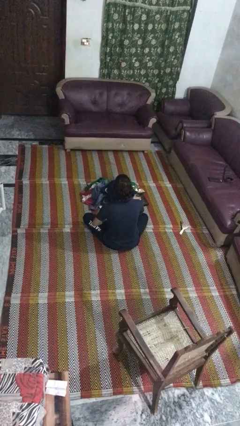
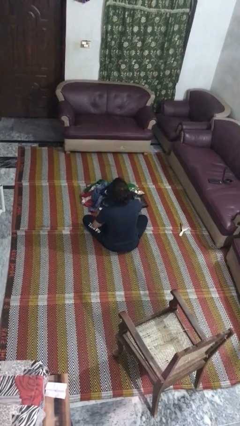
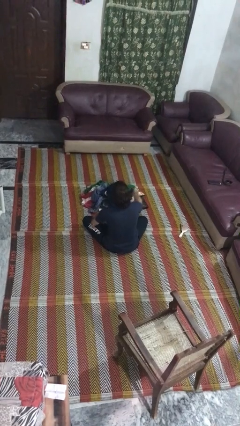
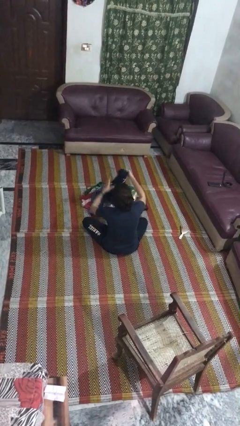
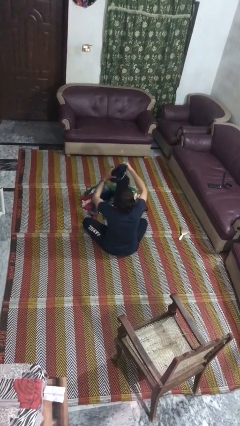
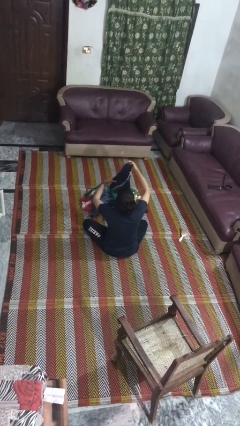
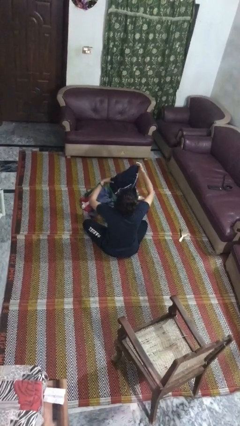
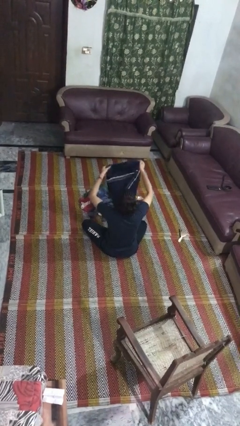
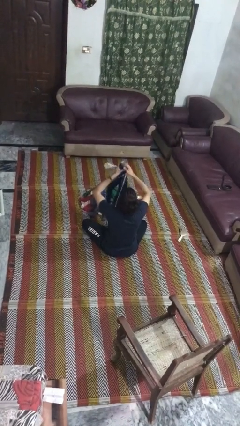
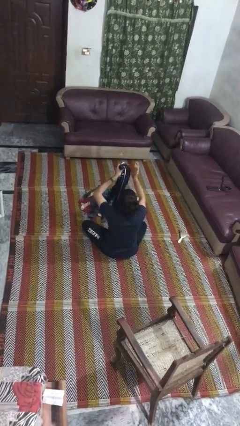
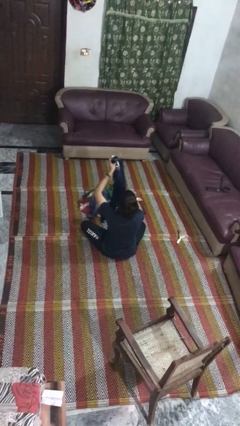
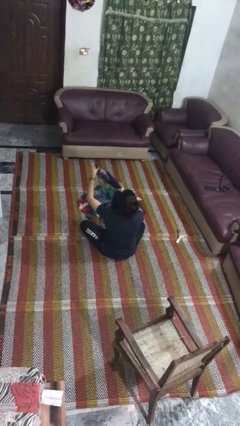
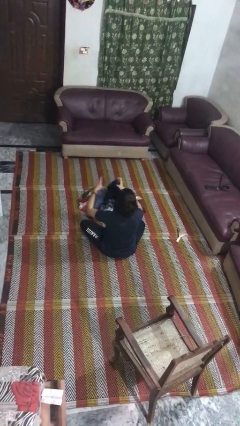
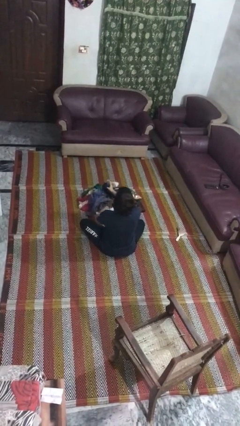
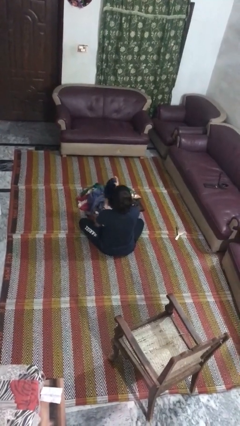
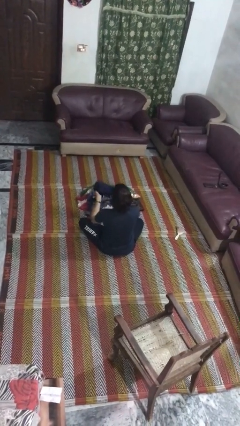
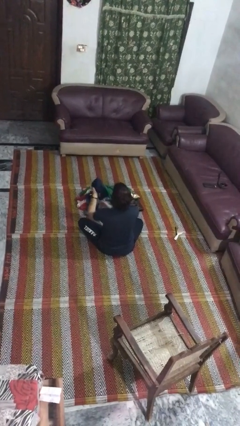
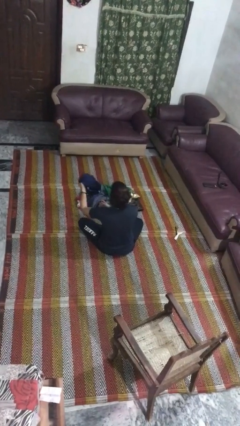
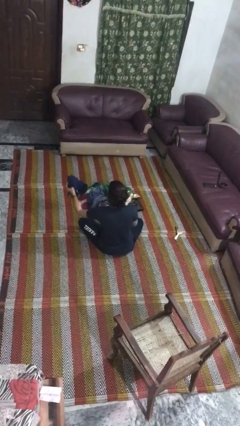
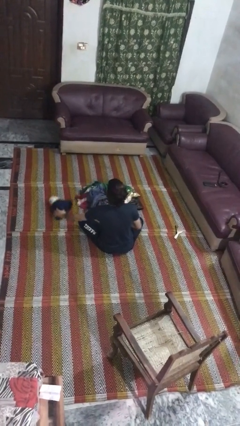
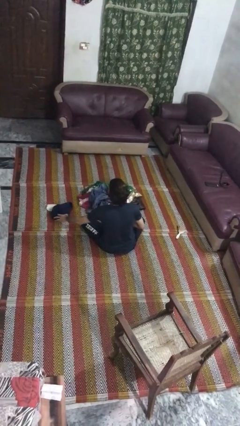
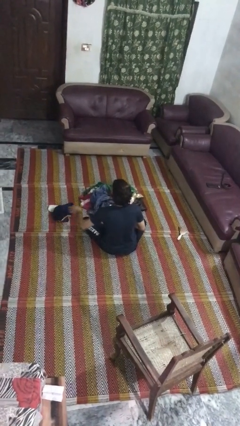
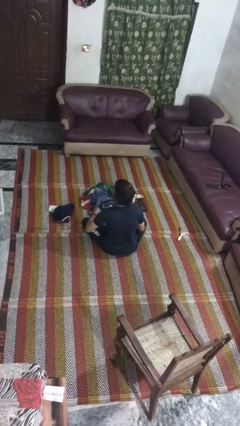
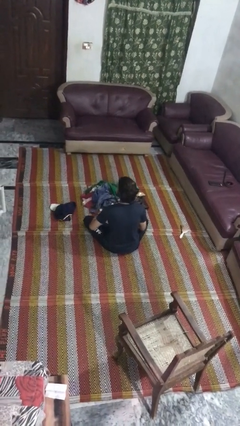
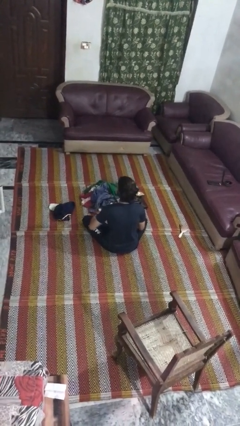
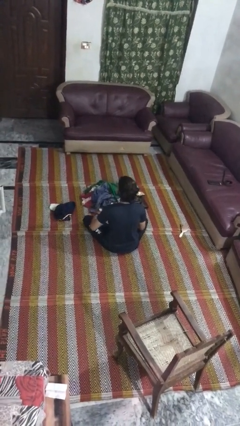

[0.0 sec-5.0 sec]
person folds pants

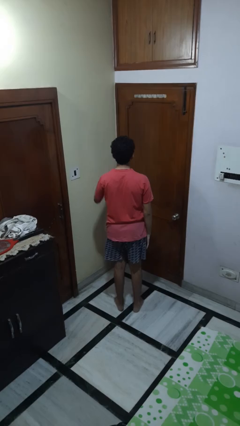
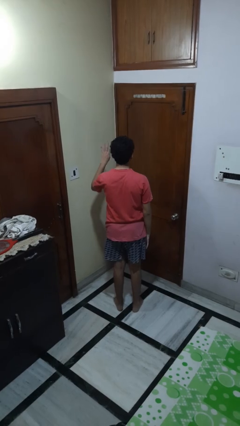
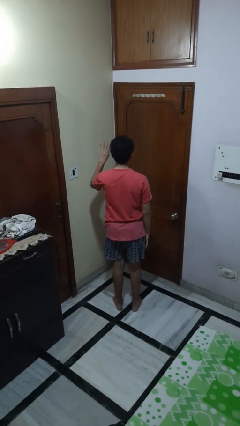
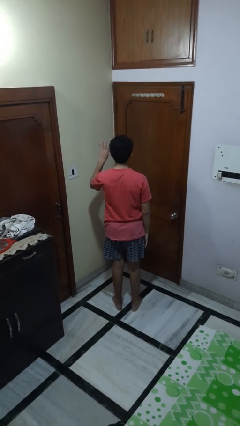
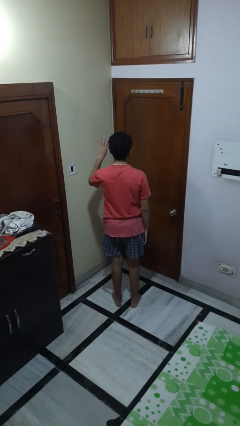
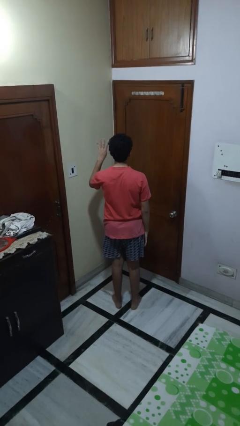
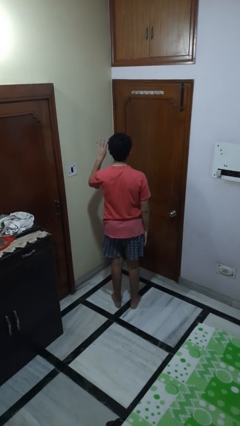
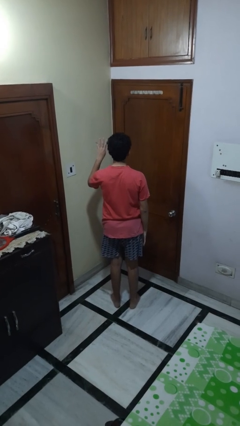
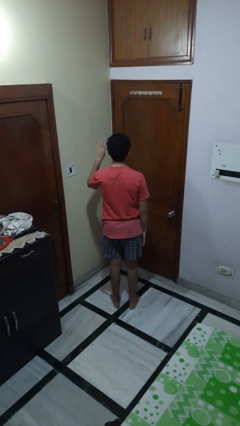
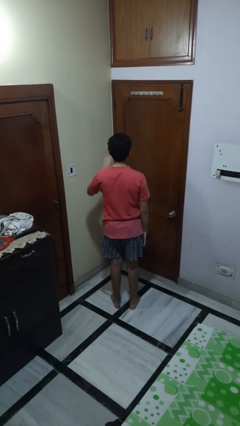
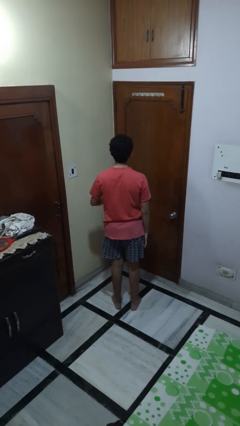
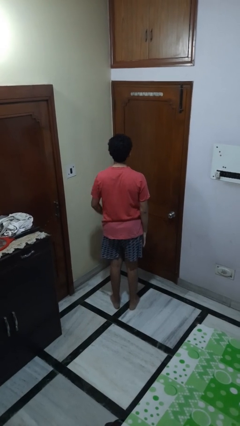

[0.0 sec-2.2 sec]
person gestures number four

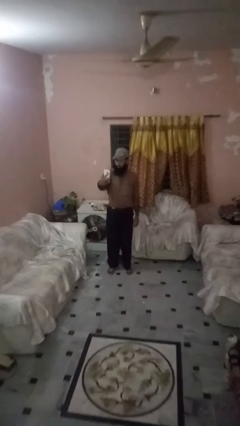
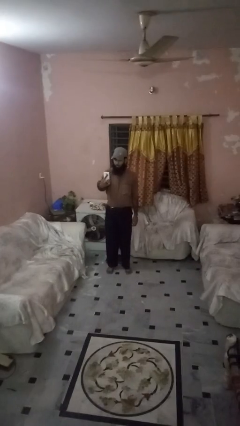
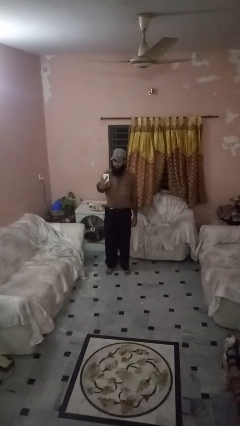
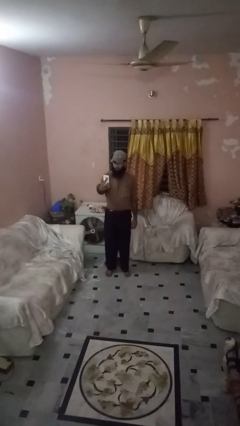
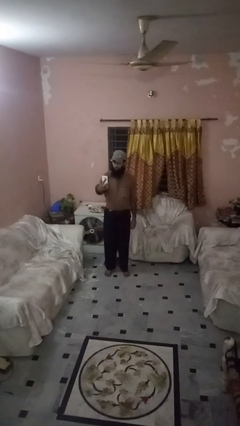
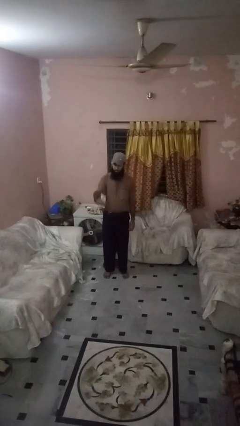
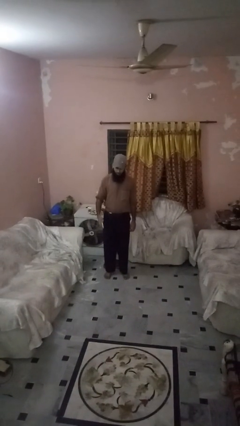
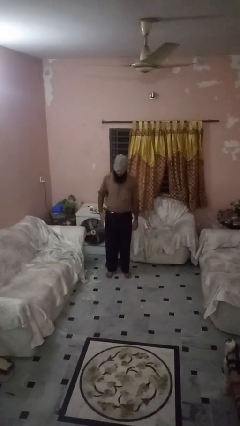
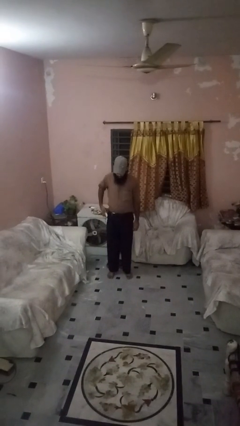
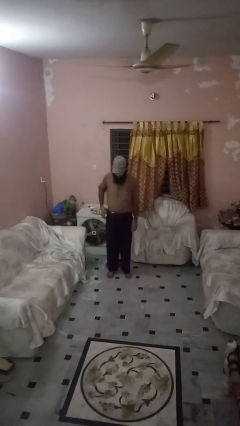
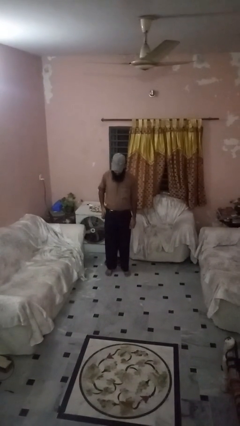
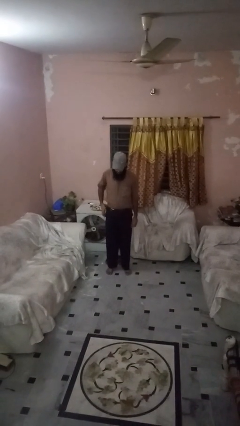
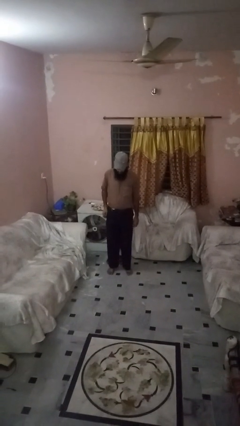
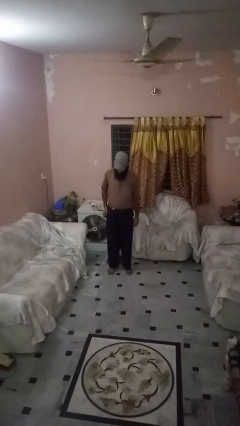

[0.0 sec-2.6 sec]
person puts phone into pocket

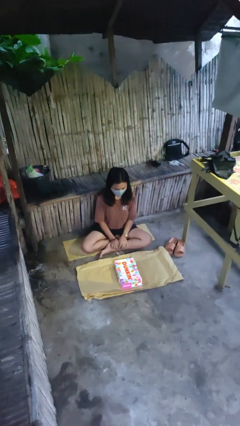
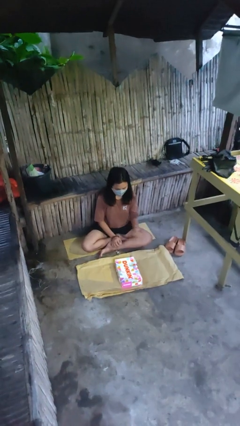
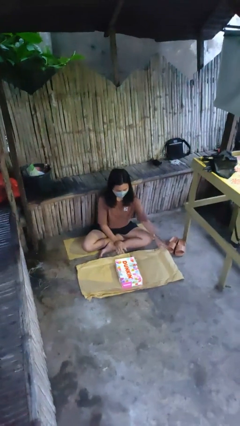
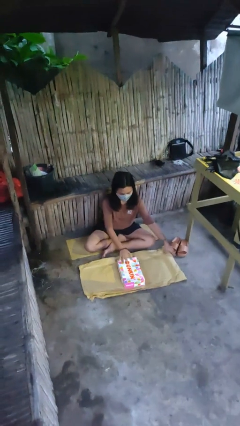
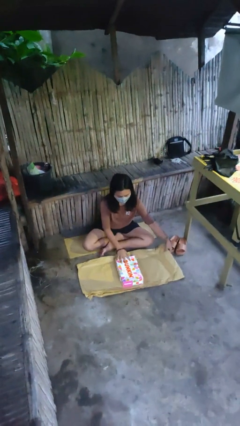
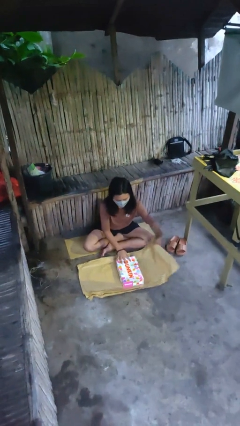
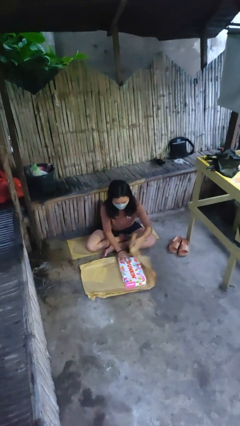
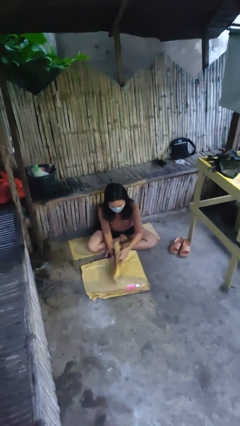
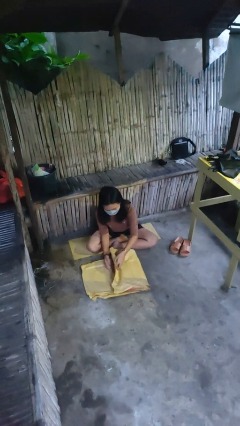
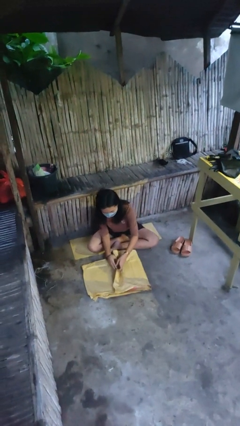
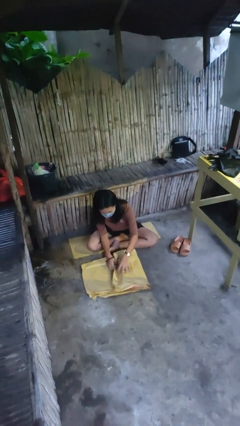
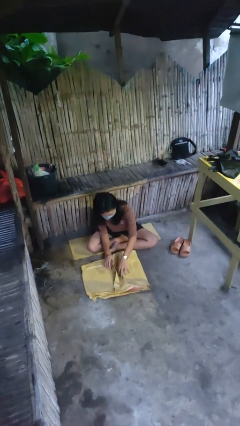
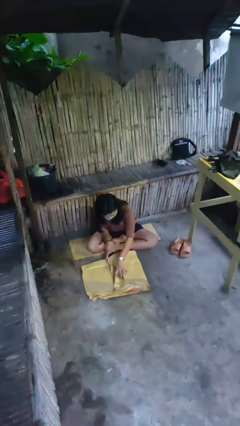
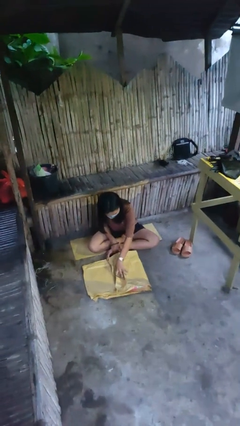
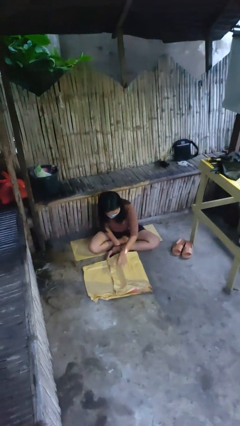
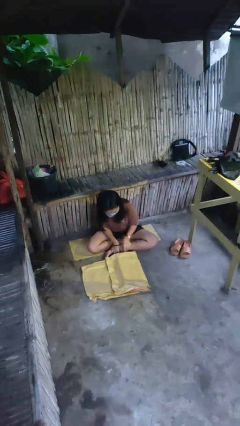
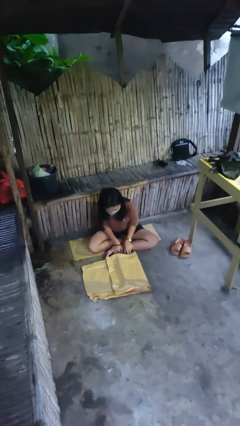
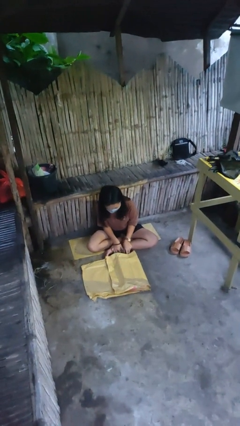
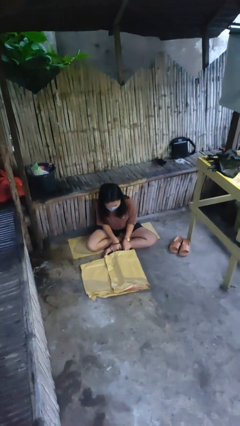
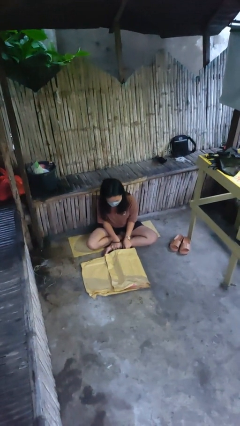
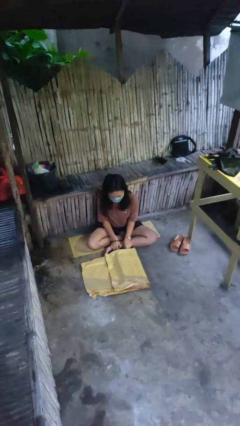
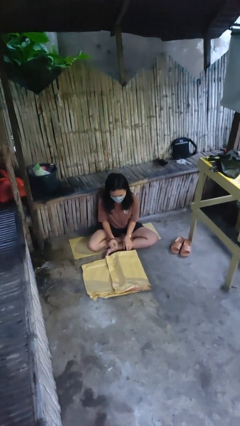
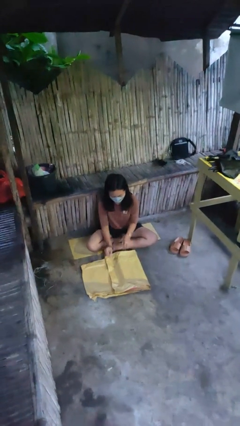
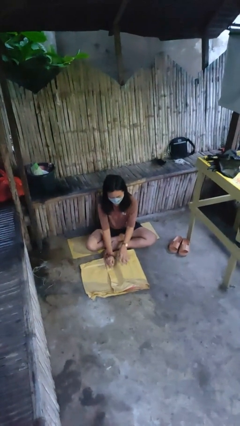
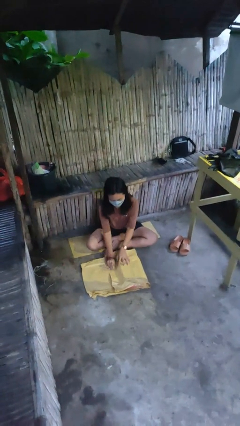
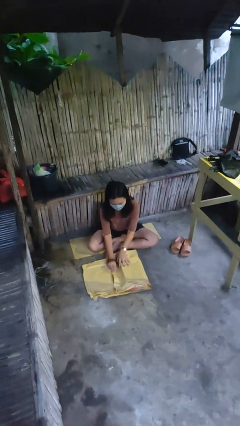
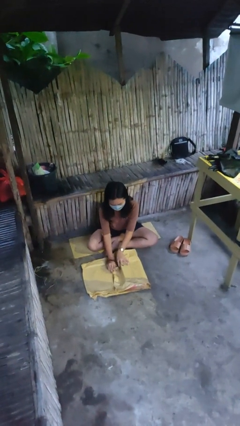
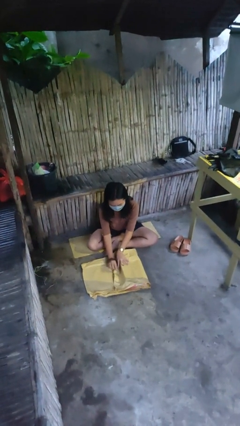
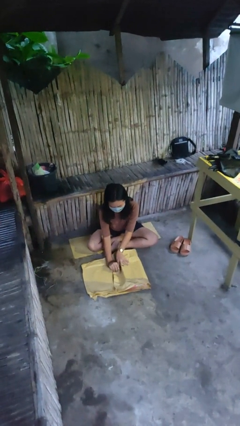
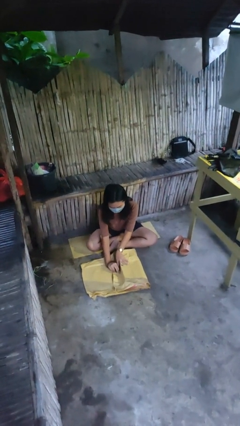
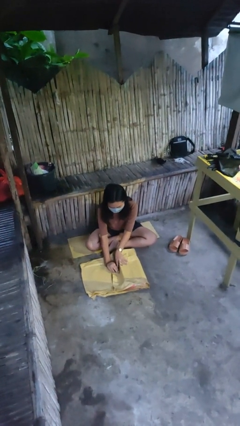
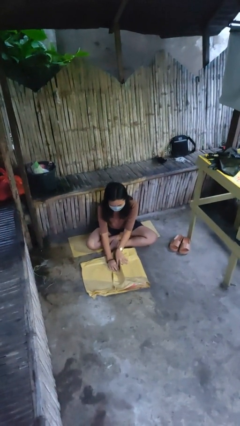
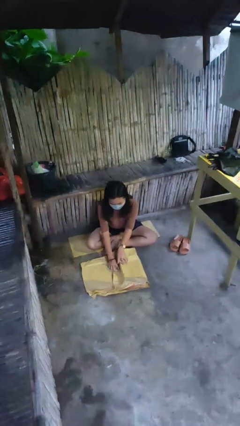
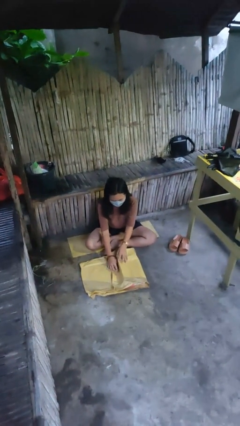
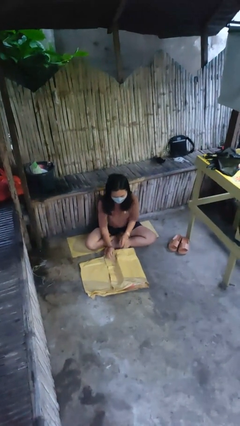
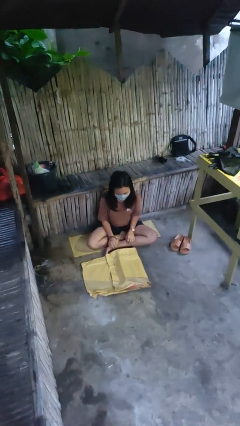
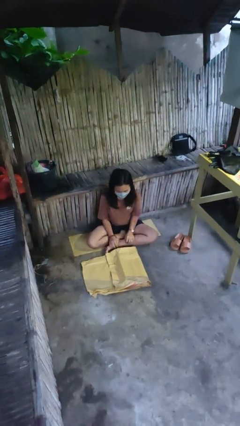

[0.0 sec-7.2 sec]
person wraps box

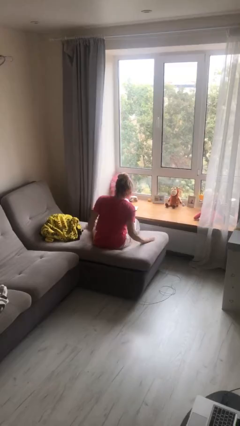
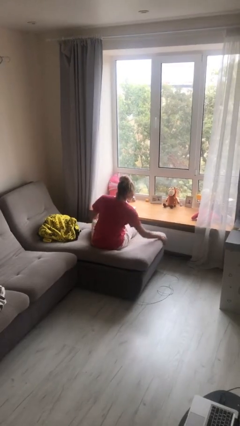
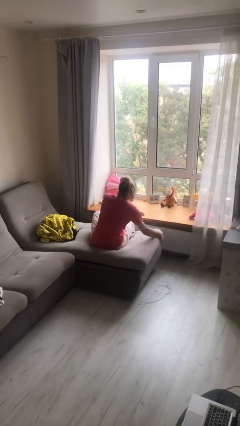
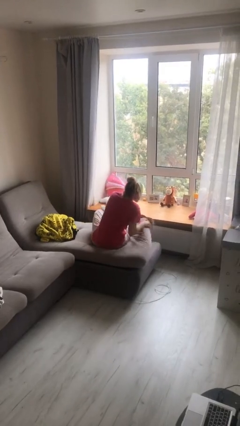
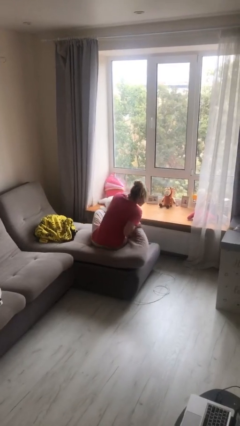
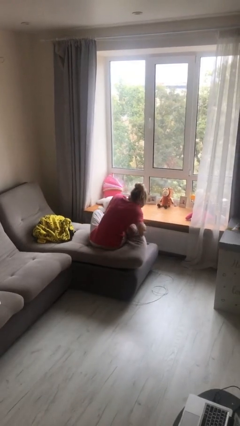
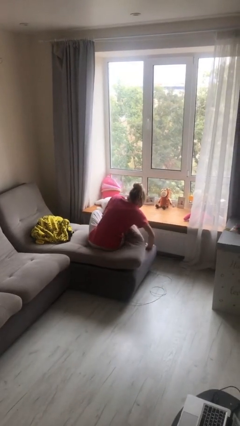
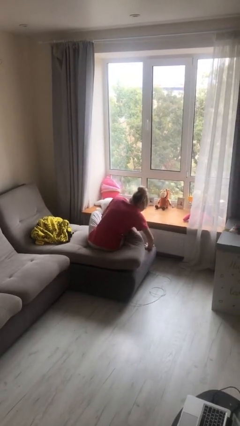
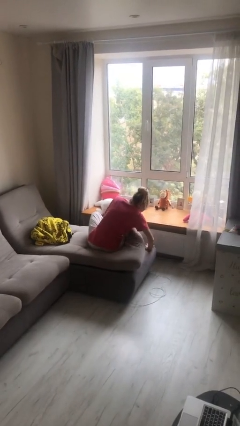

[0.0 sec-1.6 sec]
person searches in couch
